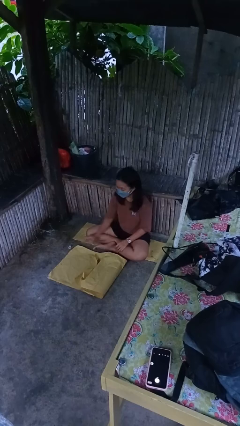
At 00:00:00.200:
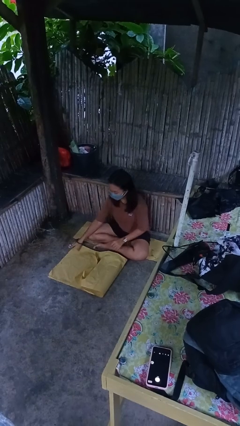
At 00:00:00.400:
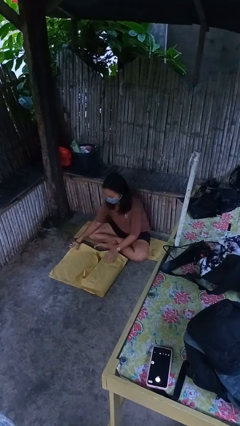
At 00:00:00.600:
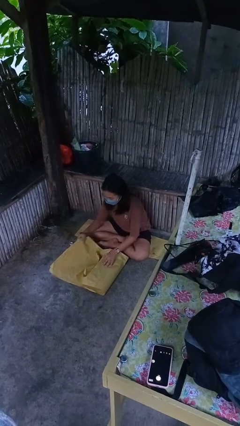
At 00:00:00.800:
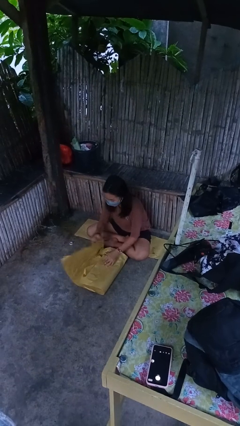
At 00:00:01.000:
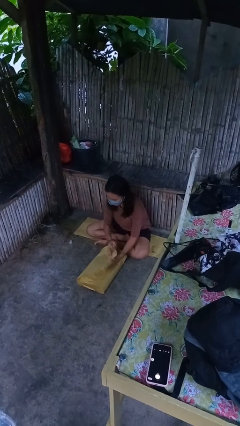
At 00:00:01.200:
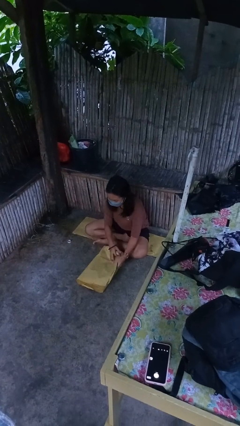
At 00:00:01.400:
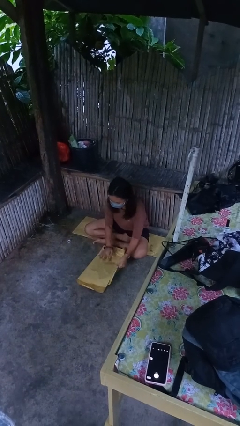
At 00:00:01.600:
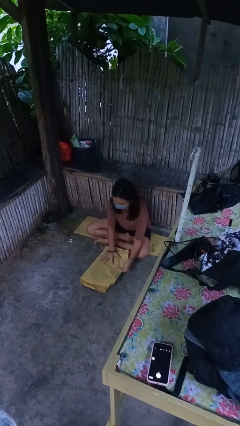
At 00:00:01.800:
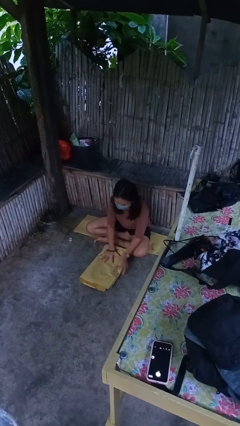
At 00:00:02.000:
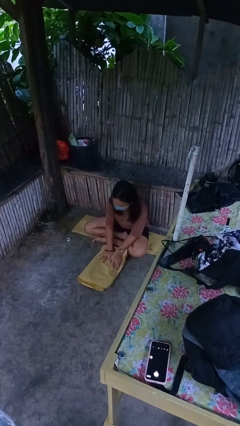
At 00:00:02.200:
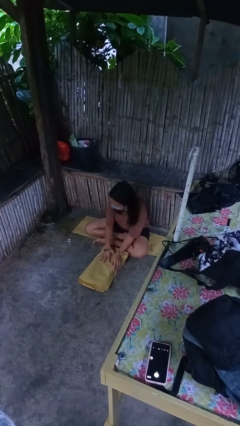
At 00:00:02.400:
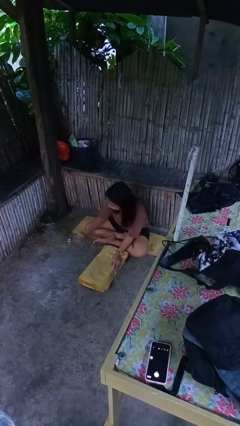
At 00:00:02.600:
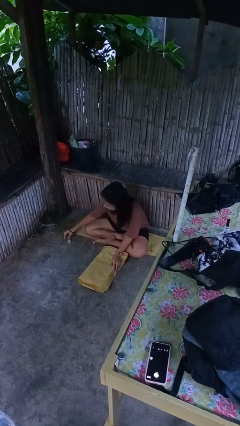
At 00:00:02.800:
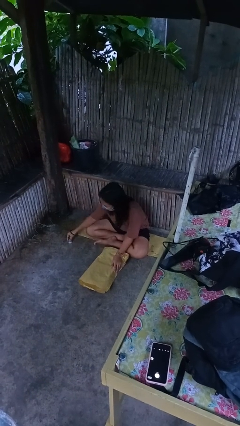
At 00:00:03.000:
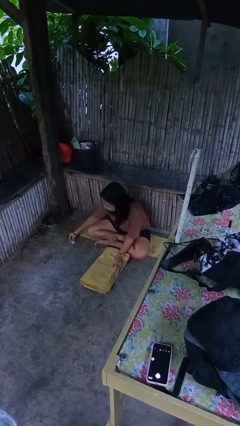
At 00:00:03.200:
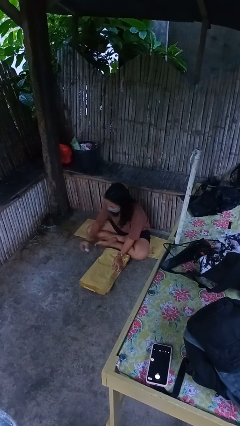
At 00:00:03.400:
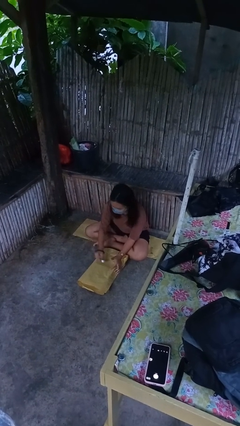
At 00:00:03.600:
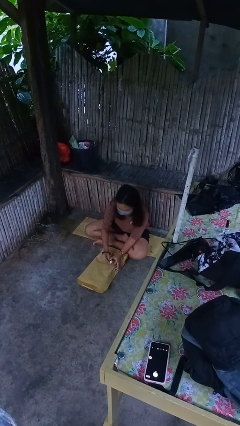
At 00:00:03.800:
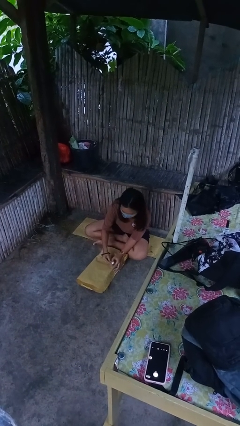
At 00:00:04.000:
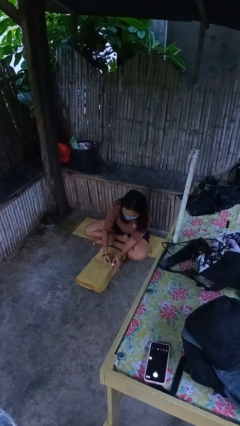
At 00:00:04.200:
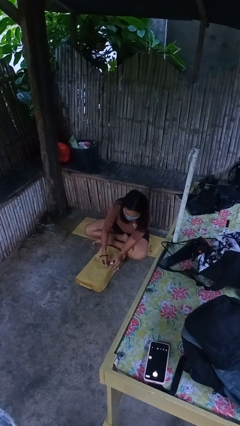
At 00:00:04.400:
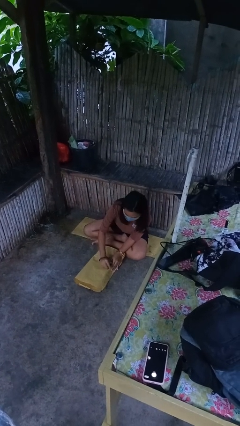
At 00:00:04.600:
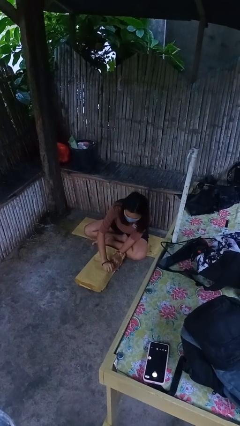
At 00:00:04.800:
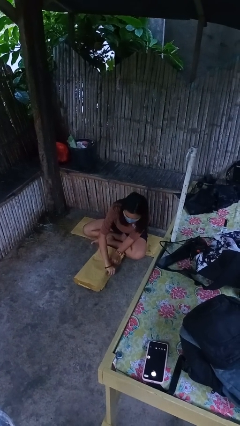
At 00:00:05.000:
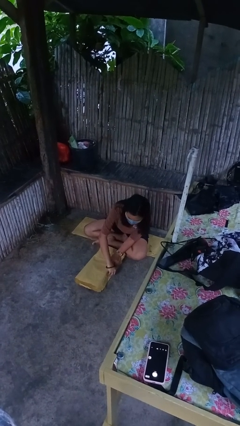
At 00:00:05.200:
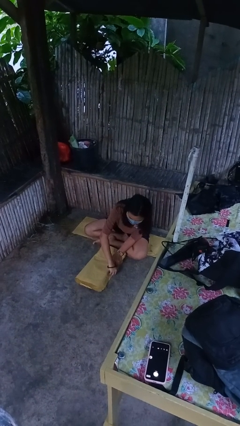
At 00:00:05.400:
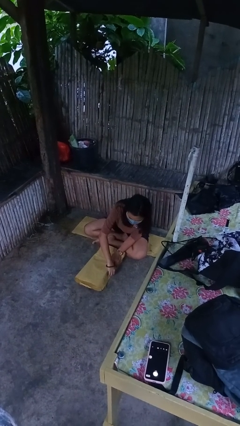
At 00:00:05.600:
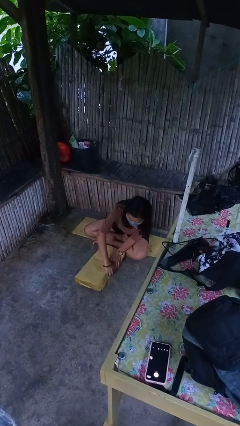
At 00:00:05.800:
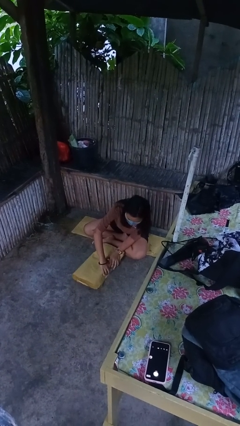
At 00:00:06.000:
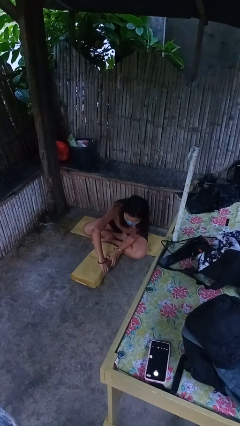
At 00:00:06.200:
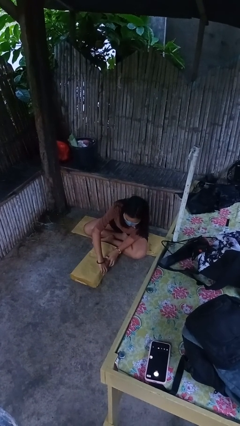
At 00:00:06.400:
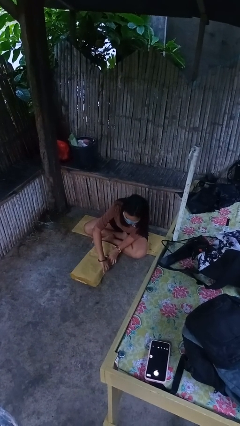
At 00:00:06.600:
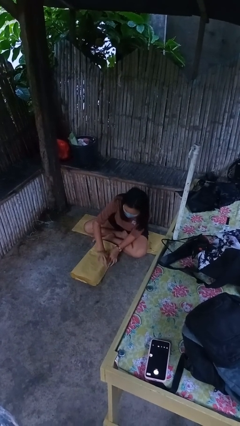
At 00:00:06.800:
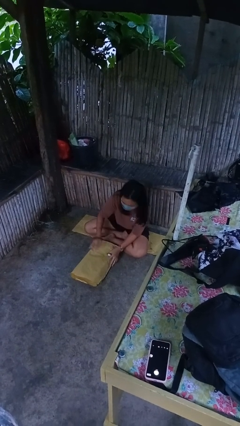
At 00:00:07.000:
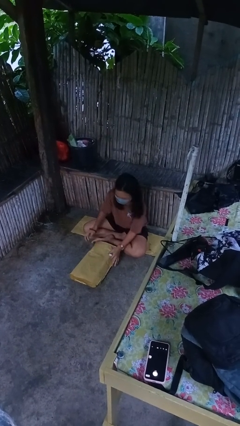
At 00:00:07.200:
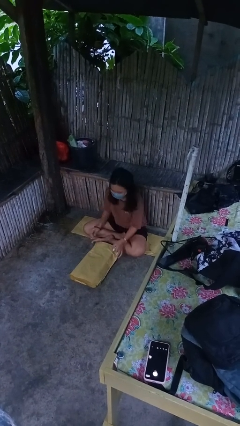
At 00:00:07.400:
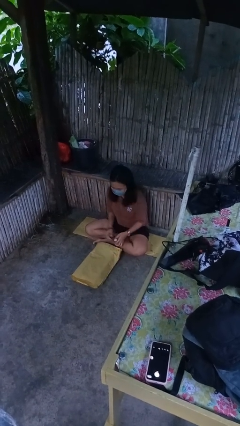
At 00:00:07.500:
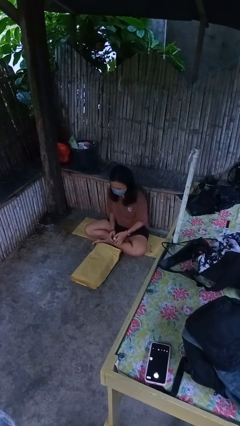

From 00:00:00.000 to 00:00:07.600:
person wraps box

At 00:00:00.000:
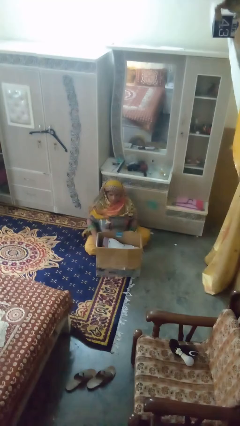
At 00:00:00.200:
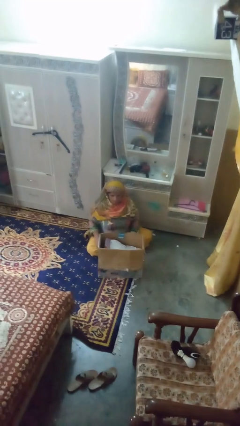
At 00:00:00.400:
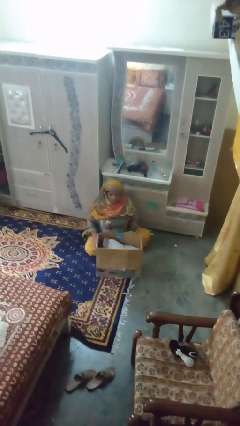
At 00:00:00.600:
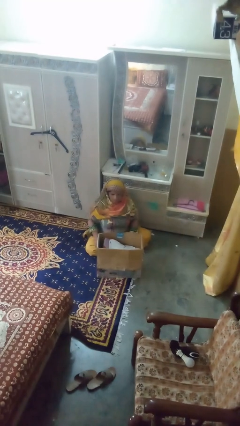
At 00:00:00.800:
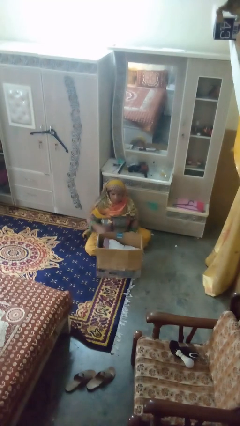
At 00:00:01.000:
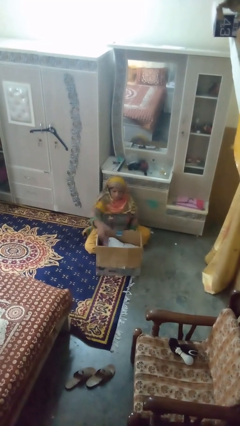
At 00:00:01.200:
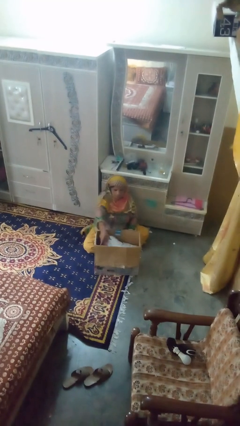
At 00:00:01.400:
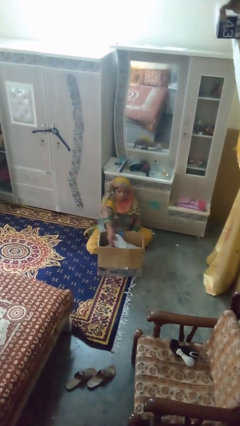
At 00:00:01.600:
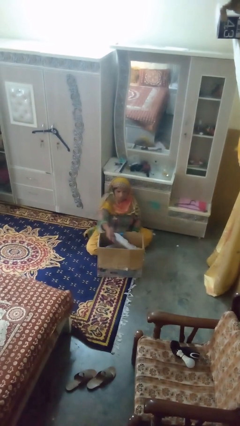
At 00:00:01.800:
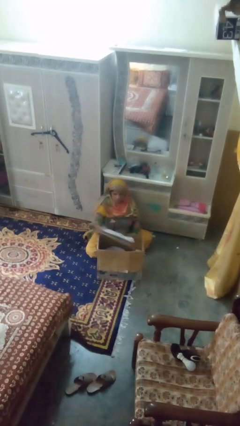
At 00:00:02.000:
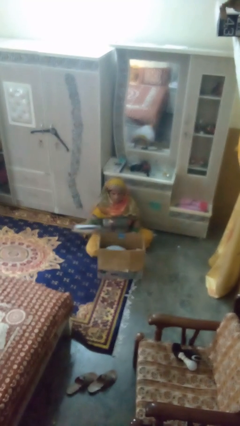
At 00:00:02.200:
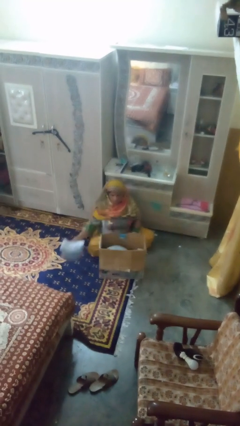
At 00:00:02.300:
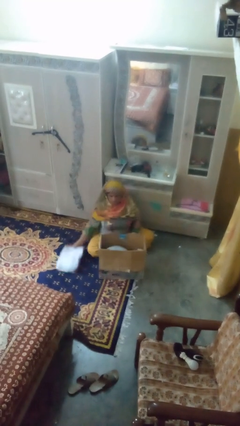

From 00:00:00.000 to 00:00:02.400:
person takes object from box

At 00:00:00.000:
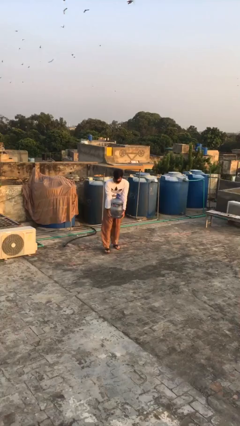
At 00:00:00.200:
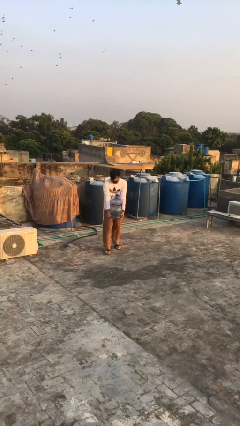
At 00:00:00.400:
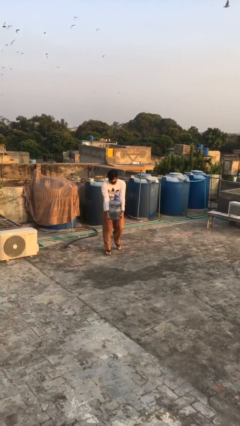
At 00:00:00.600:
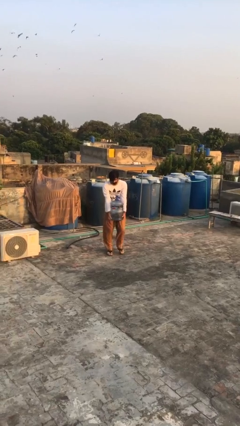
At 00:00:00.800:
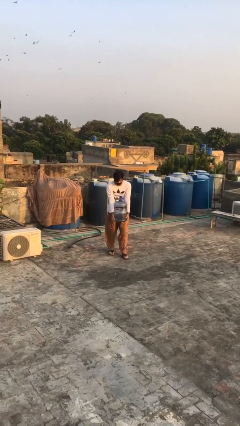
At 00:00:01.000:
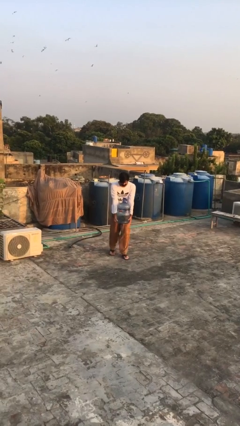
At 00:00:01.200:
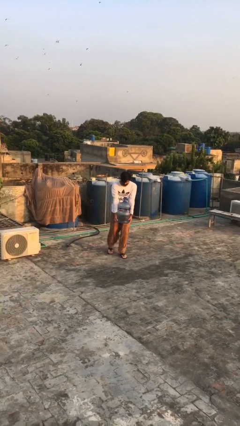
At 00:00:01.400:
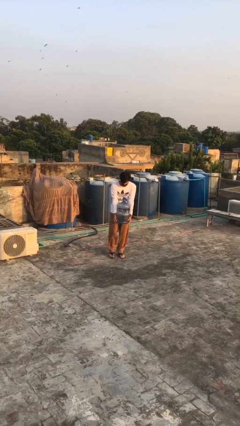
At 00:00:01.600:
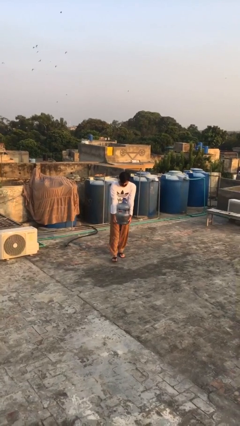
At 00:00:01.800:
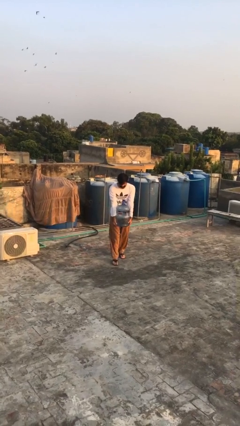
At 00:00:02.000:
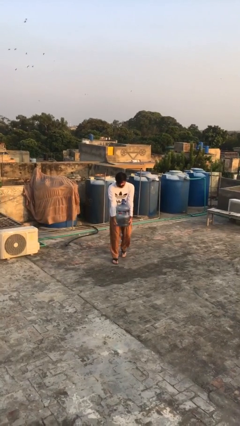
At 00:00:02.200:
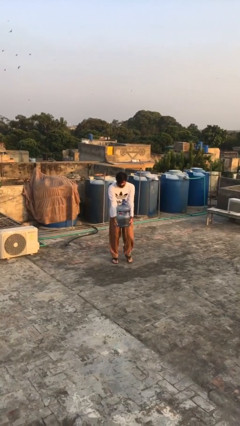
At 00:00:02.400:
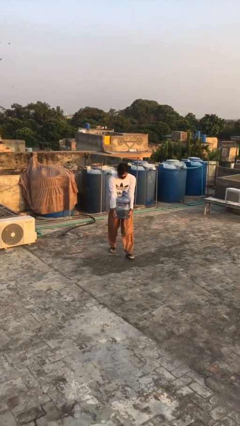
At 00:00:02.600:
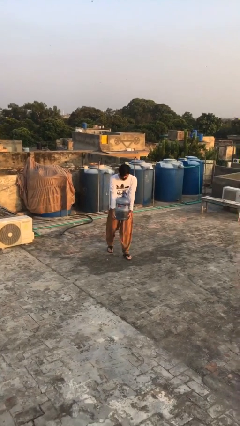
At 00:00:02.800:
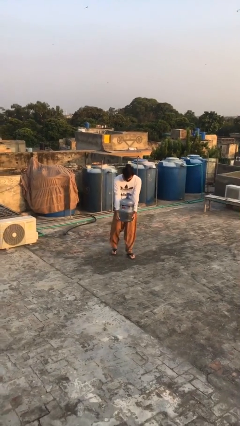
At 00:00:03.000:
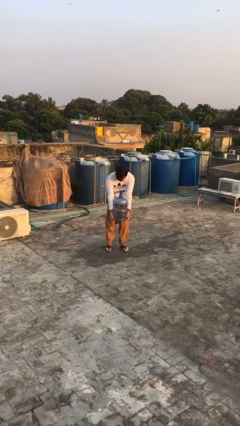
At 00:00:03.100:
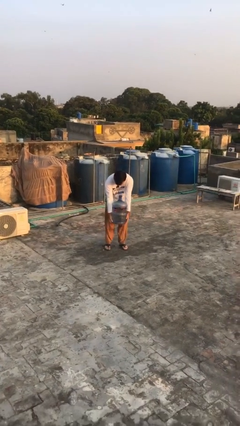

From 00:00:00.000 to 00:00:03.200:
person carries heavy object

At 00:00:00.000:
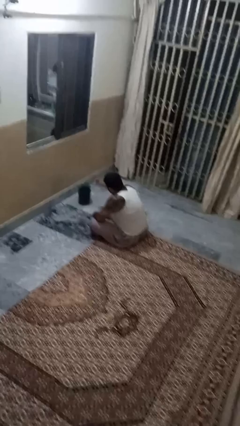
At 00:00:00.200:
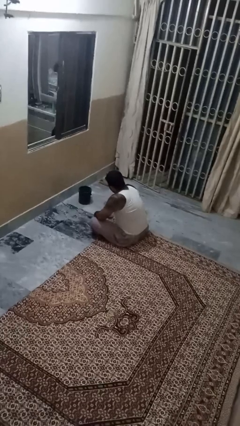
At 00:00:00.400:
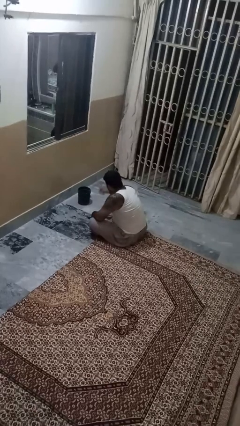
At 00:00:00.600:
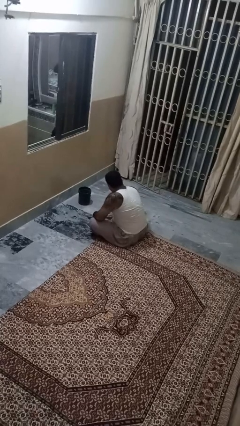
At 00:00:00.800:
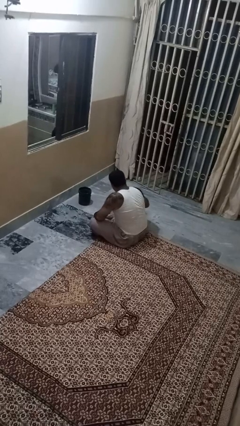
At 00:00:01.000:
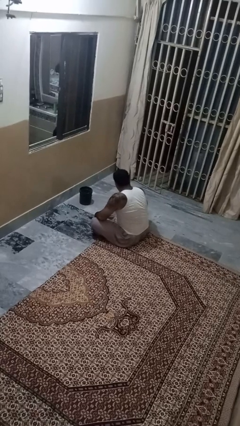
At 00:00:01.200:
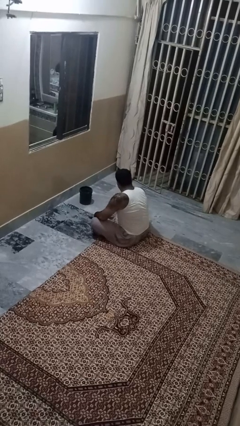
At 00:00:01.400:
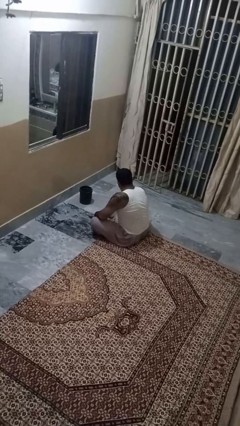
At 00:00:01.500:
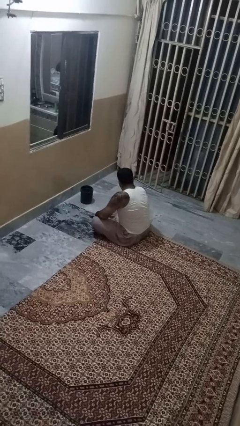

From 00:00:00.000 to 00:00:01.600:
person discards trash

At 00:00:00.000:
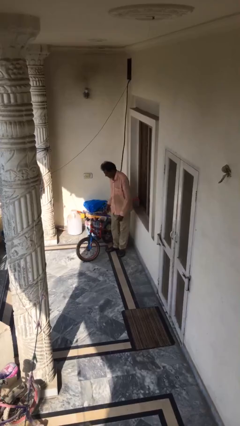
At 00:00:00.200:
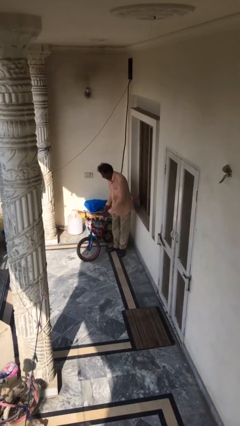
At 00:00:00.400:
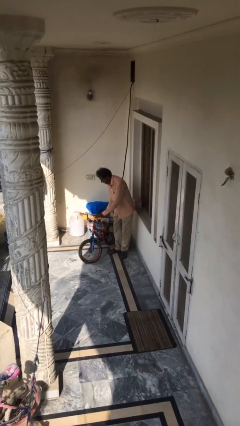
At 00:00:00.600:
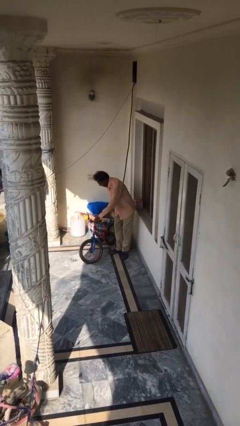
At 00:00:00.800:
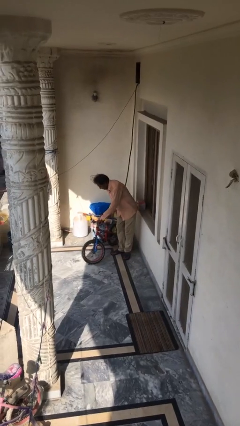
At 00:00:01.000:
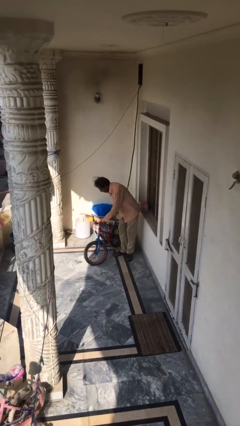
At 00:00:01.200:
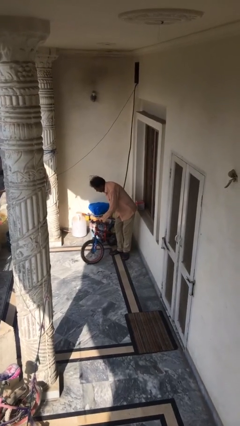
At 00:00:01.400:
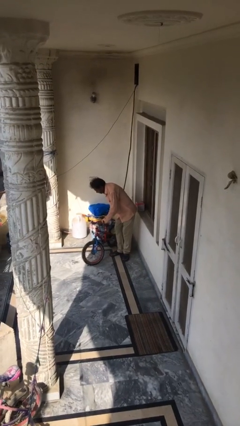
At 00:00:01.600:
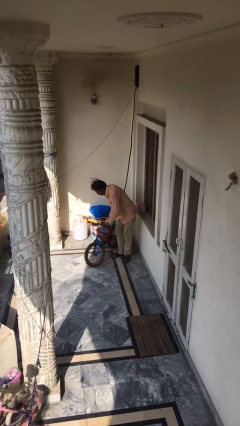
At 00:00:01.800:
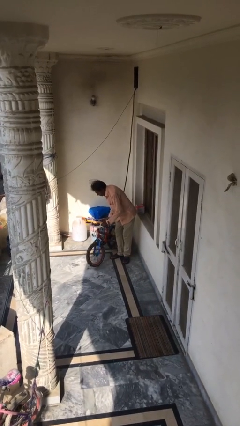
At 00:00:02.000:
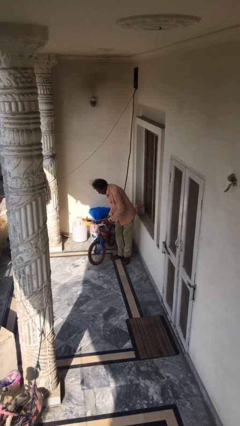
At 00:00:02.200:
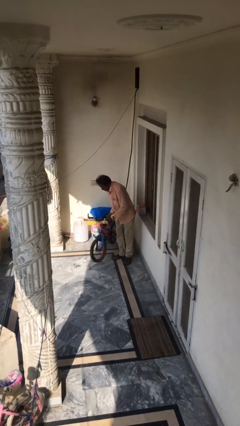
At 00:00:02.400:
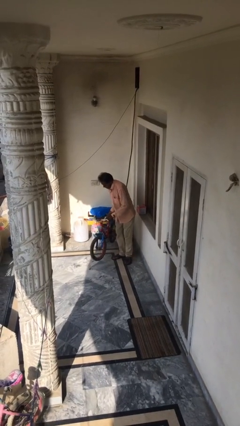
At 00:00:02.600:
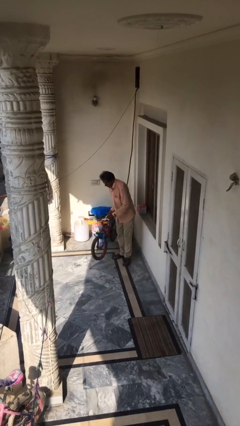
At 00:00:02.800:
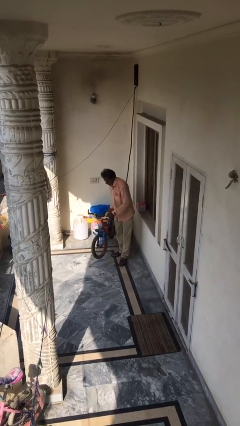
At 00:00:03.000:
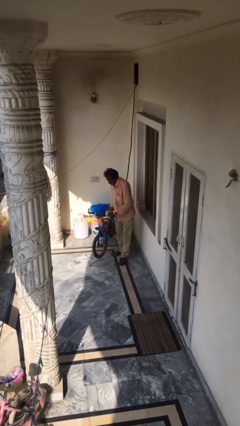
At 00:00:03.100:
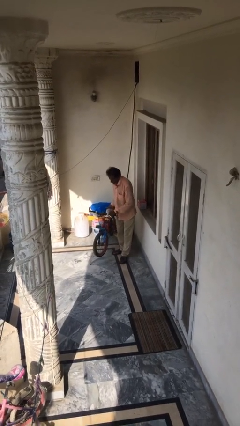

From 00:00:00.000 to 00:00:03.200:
person picks up object from floor
